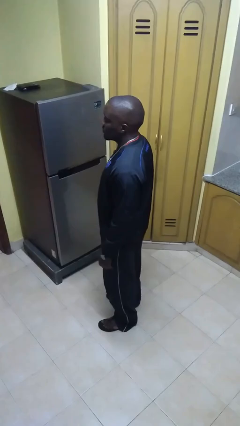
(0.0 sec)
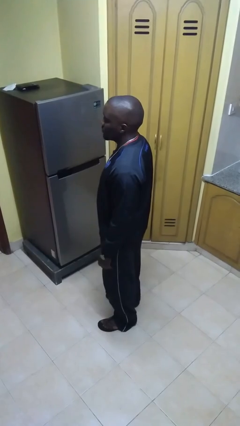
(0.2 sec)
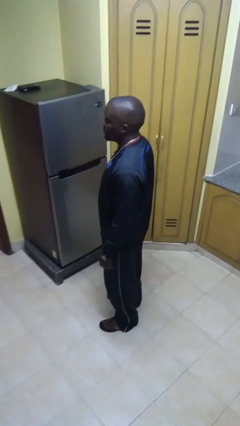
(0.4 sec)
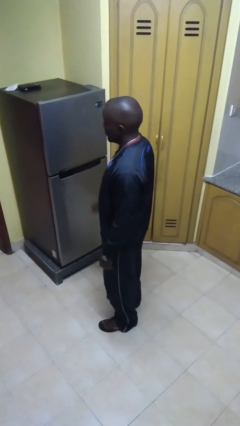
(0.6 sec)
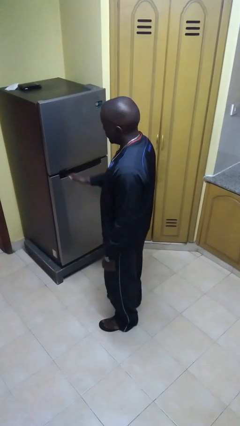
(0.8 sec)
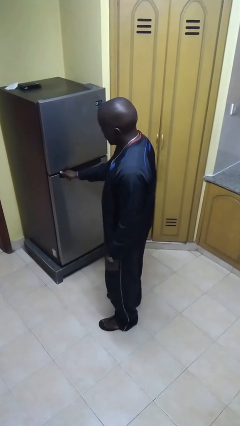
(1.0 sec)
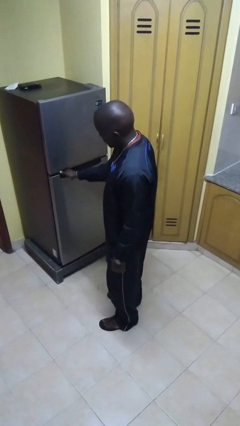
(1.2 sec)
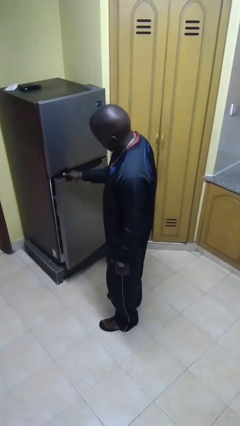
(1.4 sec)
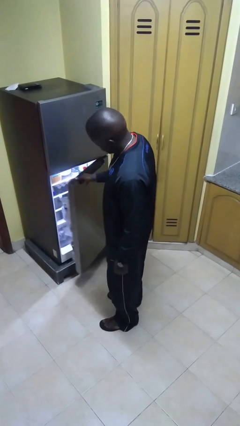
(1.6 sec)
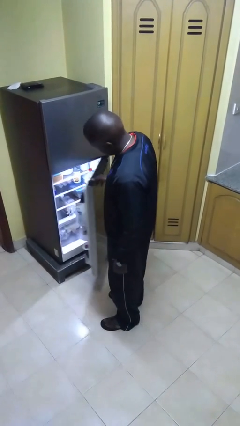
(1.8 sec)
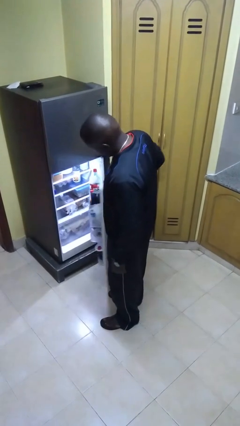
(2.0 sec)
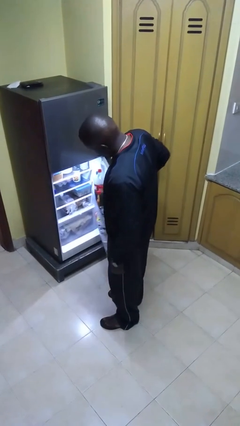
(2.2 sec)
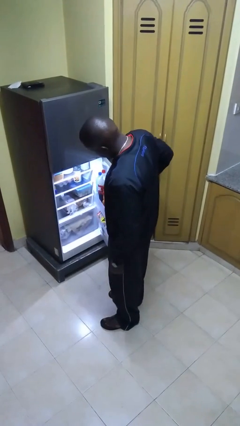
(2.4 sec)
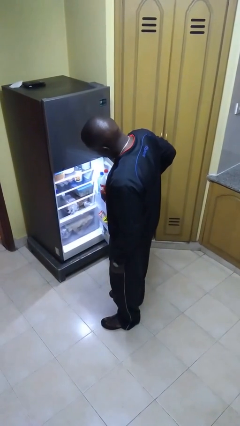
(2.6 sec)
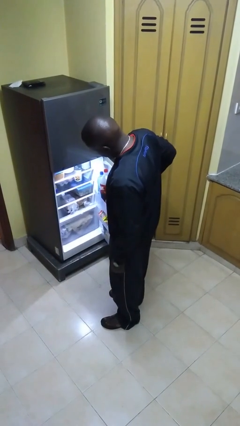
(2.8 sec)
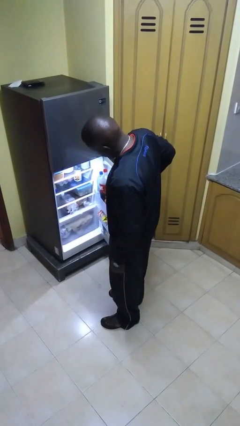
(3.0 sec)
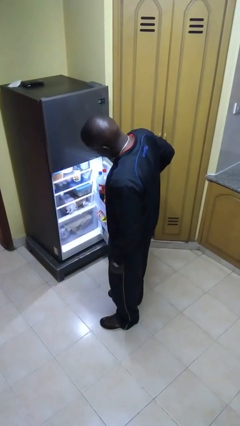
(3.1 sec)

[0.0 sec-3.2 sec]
person washes hands

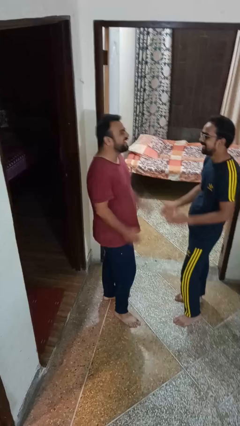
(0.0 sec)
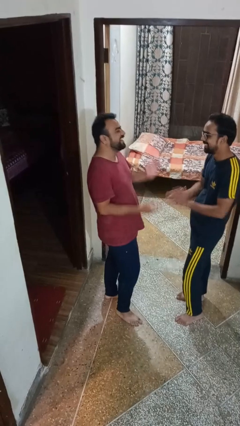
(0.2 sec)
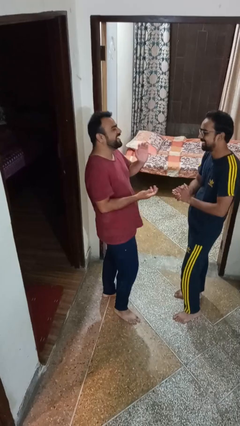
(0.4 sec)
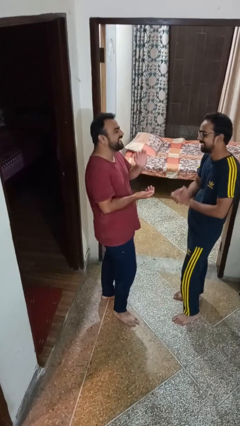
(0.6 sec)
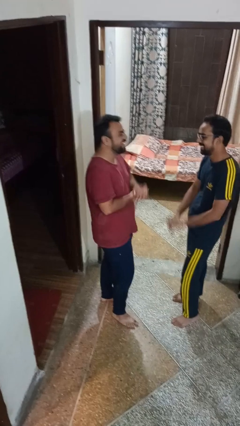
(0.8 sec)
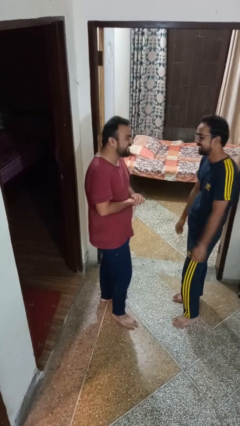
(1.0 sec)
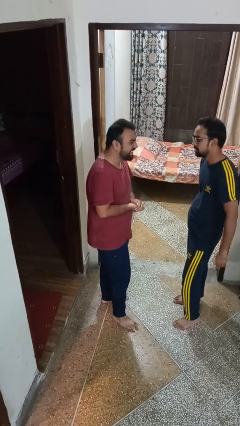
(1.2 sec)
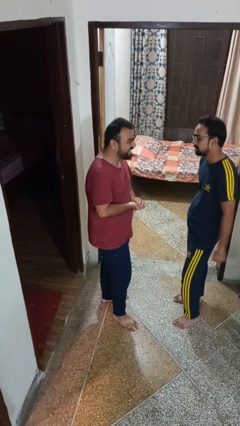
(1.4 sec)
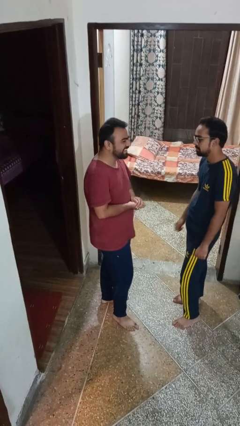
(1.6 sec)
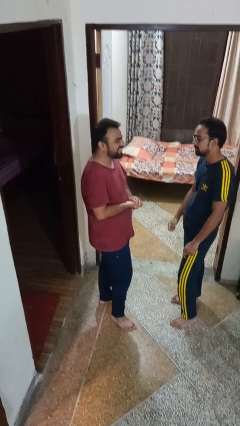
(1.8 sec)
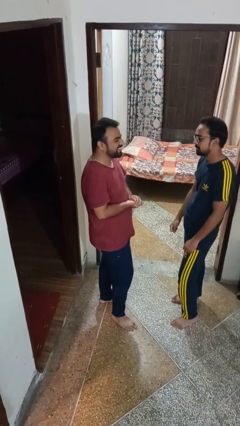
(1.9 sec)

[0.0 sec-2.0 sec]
person laughs with person

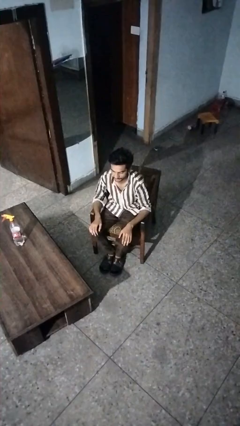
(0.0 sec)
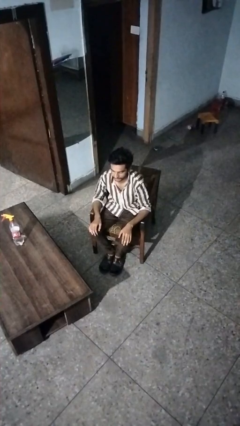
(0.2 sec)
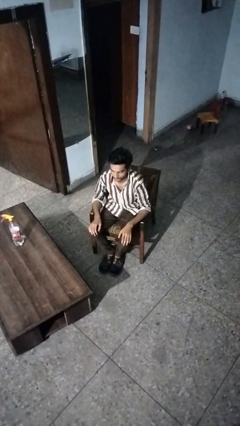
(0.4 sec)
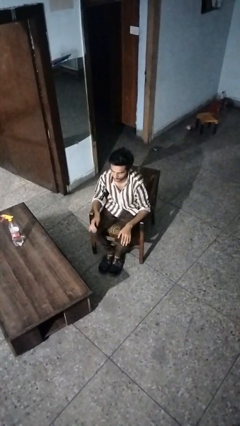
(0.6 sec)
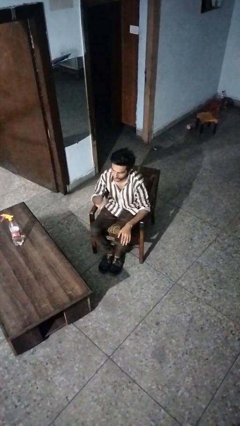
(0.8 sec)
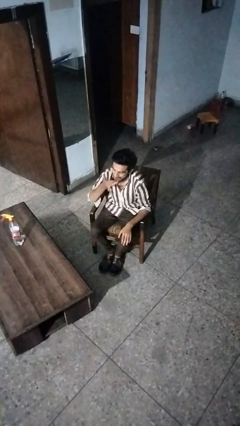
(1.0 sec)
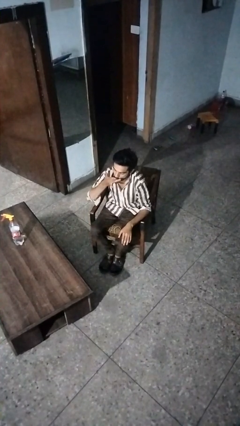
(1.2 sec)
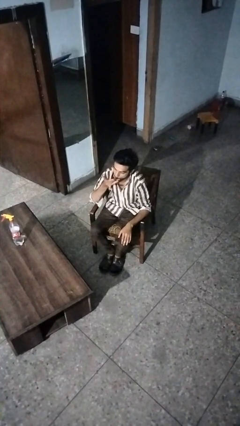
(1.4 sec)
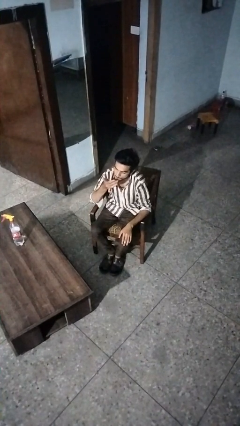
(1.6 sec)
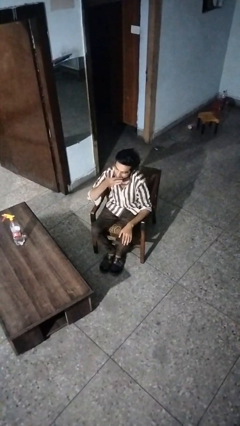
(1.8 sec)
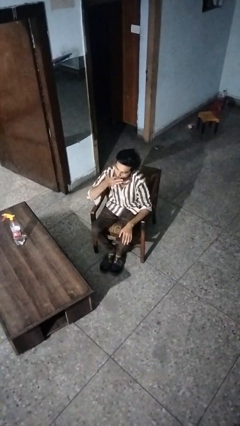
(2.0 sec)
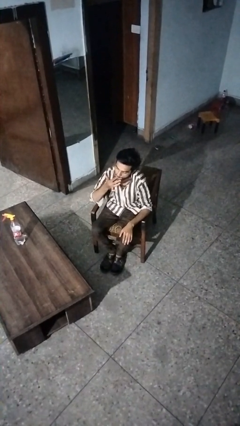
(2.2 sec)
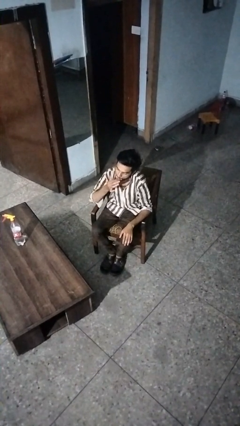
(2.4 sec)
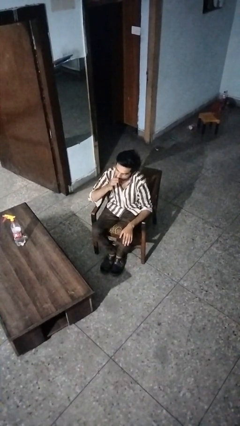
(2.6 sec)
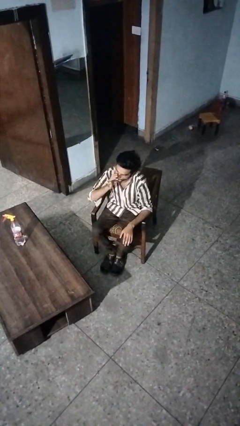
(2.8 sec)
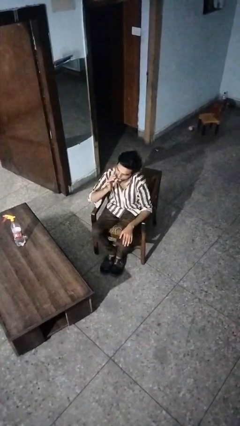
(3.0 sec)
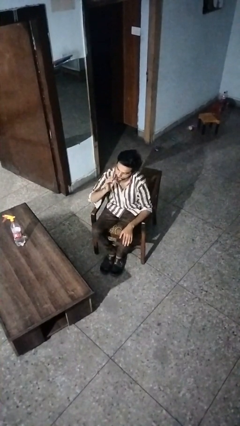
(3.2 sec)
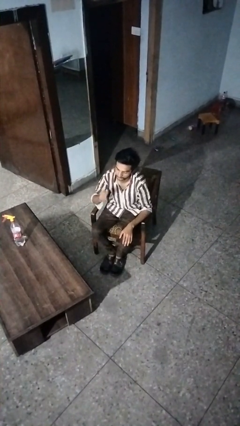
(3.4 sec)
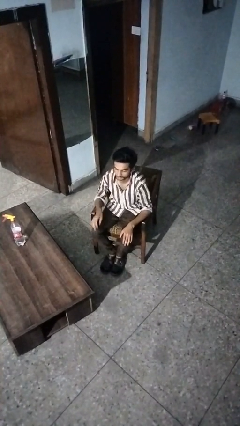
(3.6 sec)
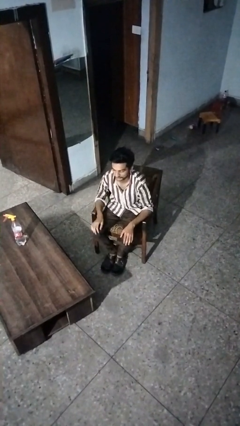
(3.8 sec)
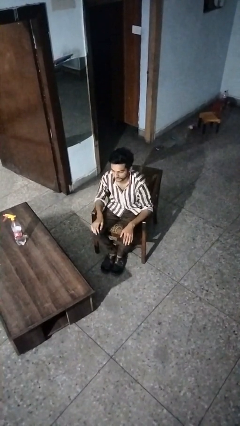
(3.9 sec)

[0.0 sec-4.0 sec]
person licks fingers

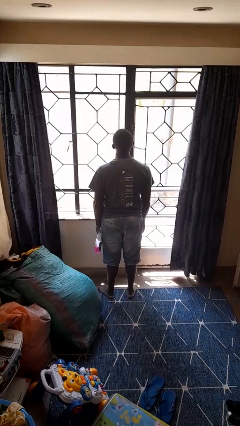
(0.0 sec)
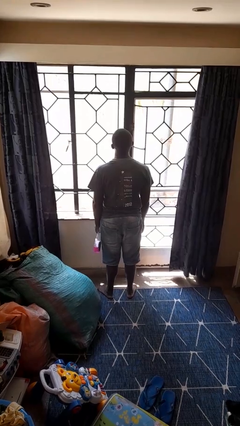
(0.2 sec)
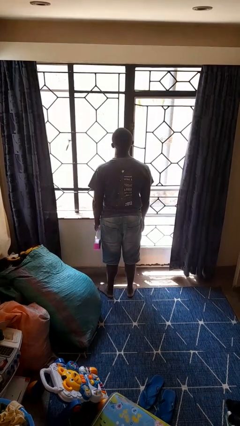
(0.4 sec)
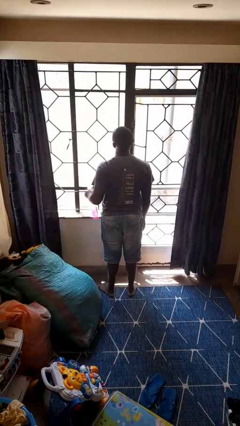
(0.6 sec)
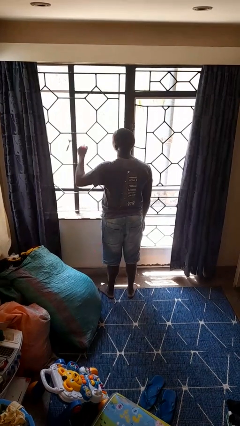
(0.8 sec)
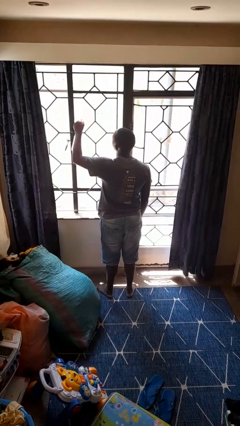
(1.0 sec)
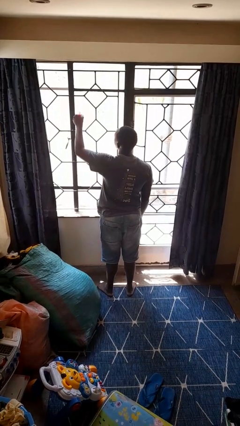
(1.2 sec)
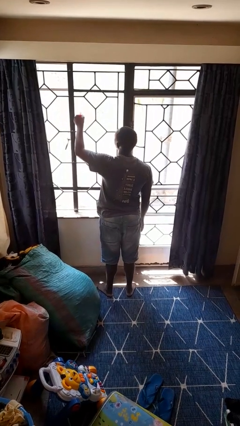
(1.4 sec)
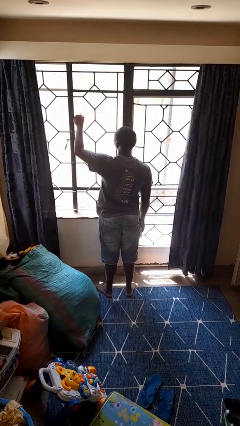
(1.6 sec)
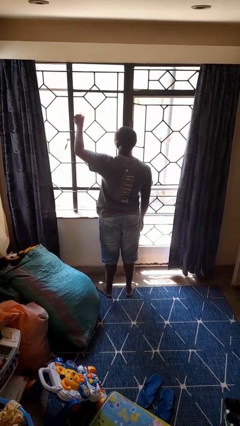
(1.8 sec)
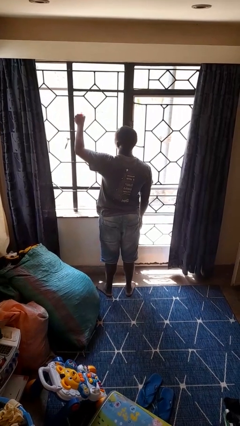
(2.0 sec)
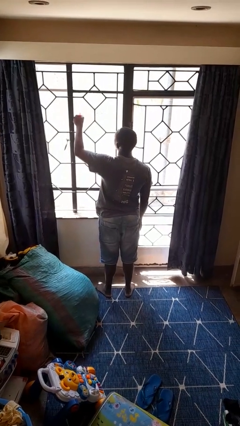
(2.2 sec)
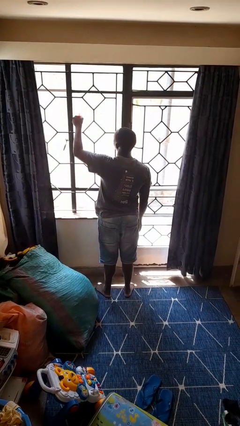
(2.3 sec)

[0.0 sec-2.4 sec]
person sprays from bottle

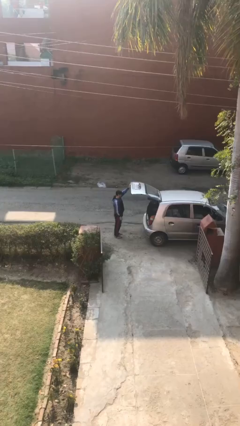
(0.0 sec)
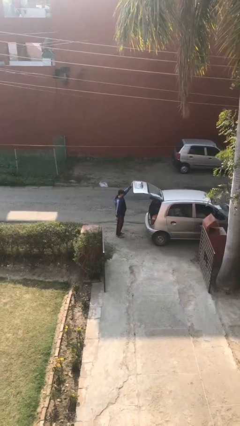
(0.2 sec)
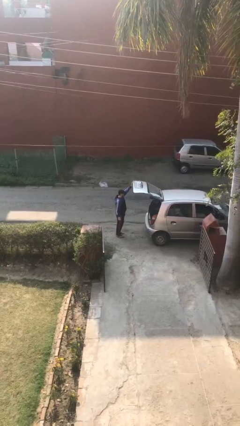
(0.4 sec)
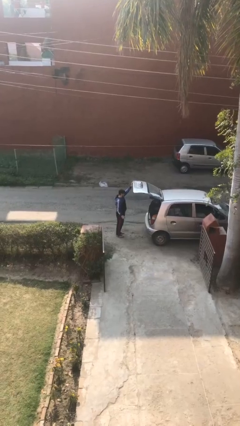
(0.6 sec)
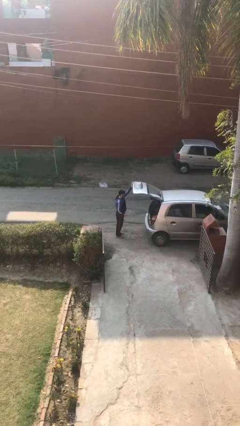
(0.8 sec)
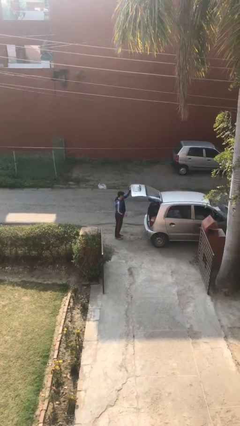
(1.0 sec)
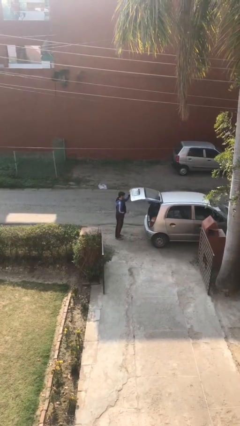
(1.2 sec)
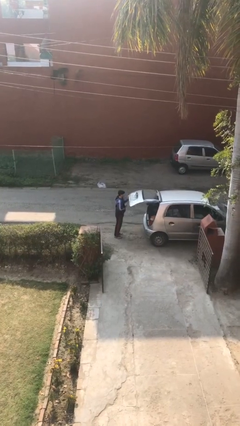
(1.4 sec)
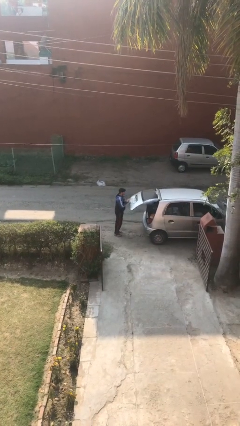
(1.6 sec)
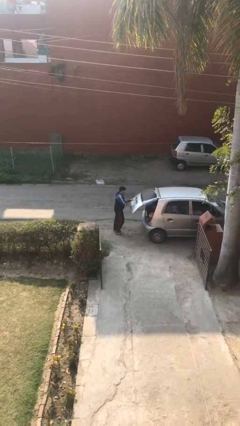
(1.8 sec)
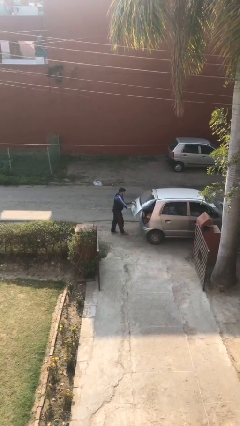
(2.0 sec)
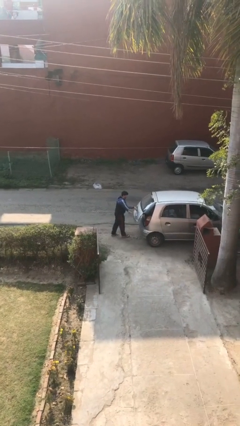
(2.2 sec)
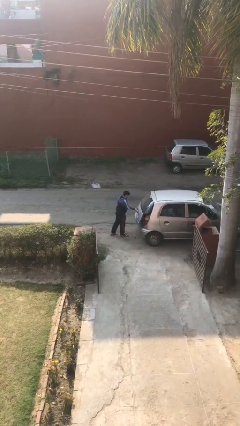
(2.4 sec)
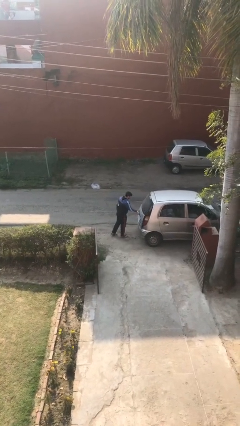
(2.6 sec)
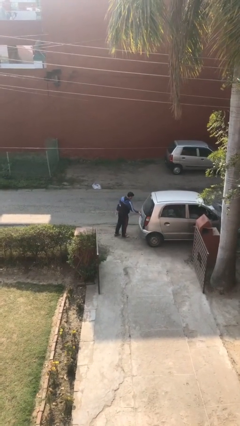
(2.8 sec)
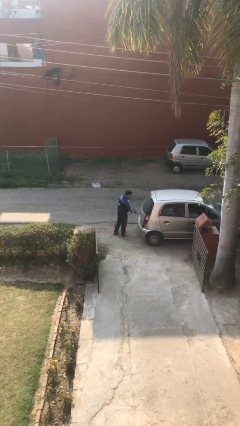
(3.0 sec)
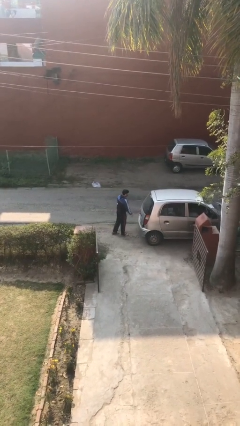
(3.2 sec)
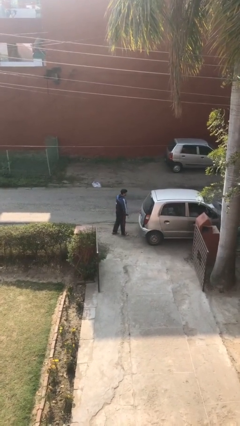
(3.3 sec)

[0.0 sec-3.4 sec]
person closes car trunk

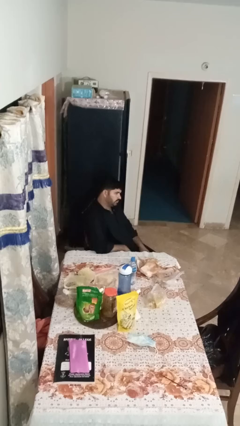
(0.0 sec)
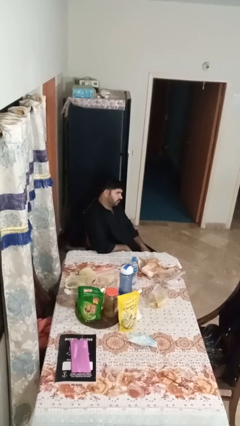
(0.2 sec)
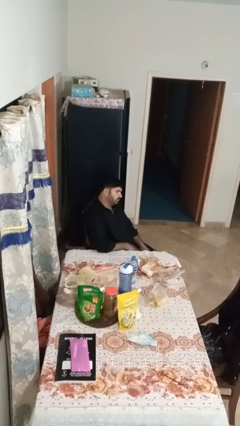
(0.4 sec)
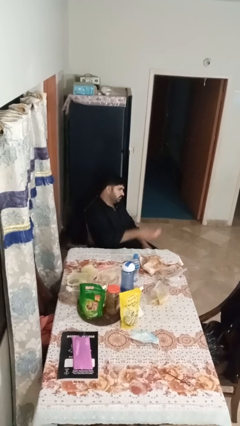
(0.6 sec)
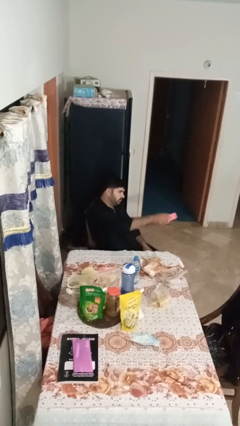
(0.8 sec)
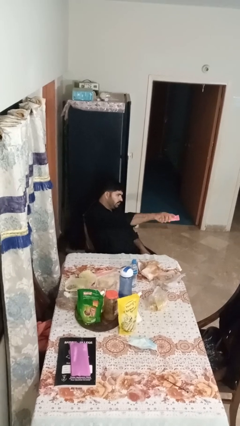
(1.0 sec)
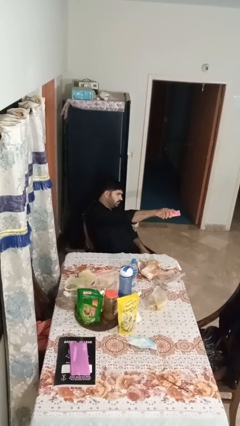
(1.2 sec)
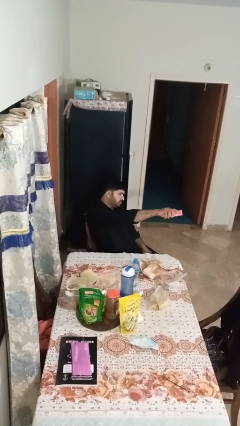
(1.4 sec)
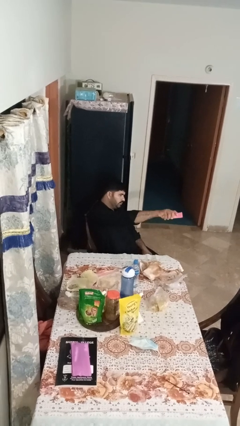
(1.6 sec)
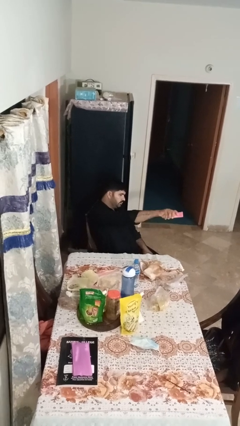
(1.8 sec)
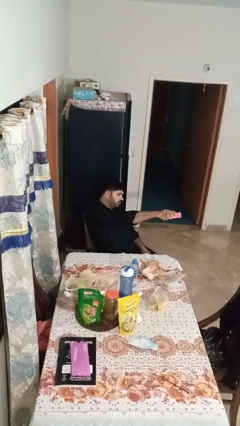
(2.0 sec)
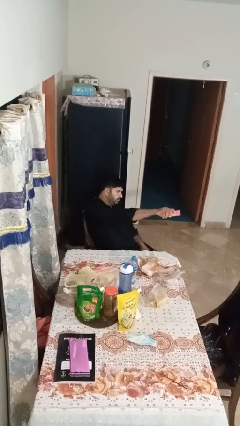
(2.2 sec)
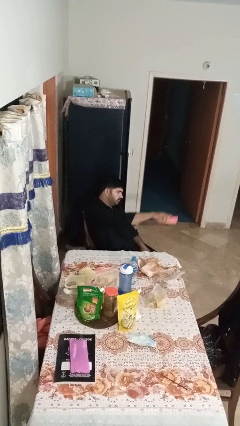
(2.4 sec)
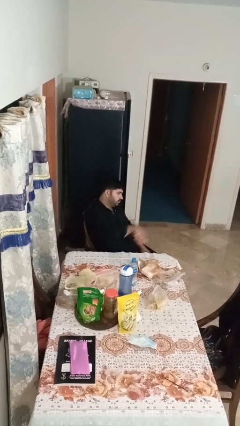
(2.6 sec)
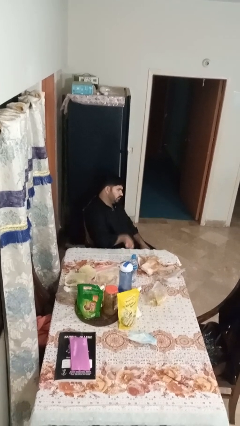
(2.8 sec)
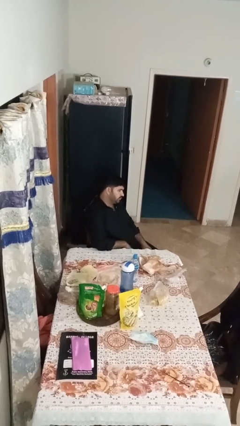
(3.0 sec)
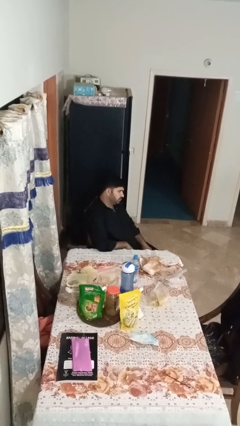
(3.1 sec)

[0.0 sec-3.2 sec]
person uses television remote
